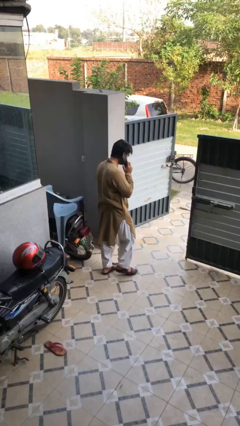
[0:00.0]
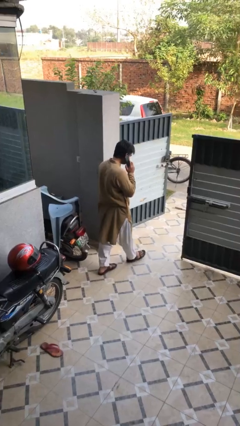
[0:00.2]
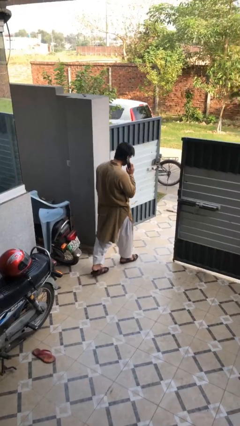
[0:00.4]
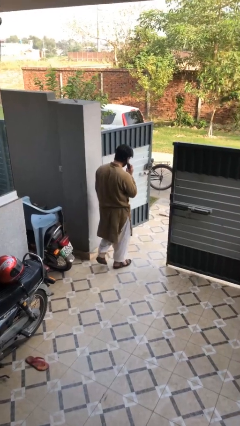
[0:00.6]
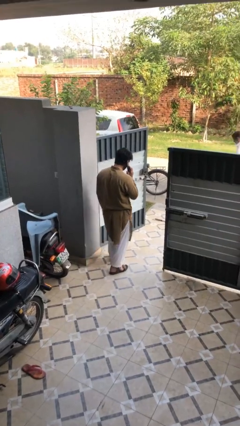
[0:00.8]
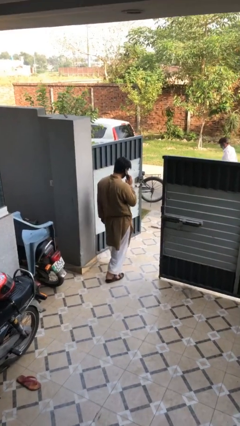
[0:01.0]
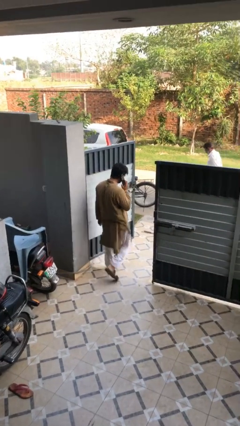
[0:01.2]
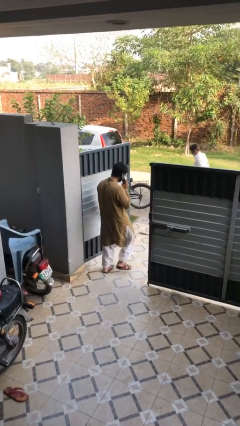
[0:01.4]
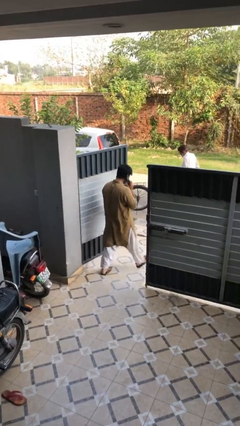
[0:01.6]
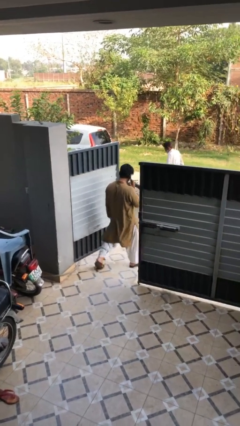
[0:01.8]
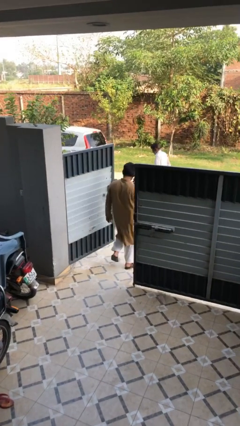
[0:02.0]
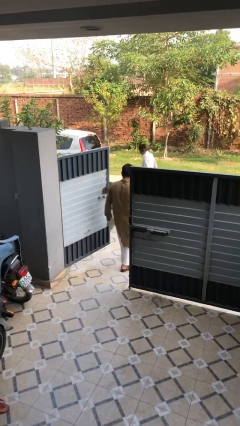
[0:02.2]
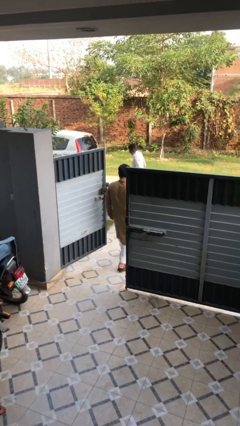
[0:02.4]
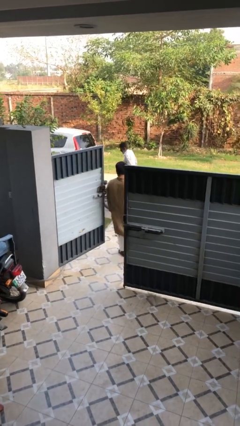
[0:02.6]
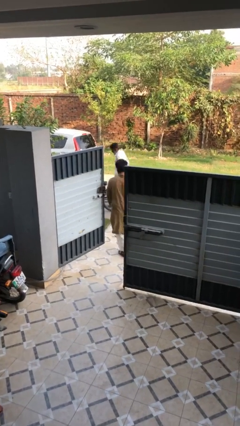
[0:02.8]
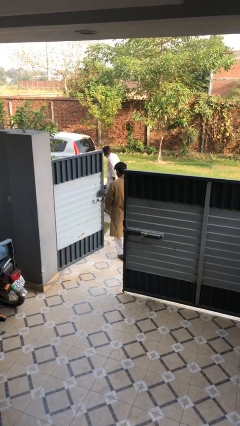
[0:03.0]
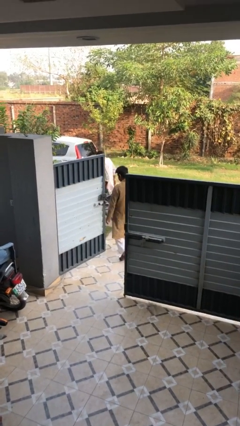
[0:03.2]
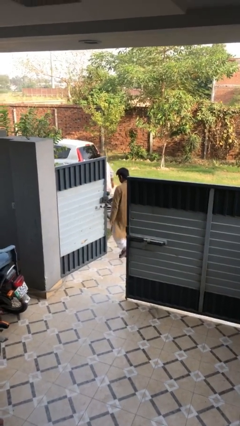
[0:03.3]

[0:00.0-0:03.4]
person exits scene through structure

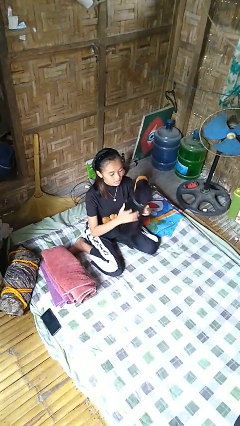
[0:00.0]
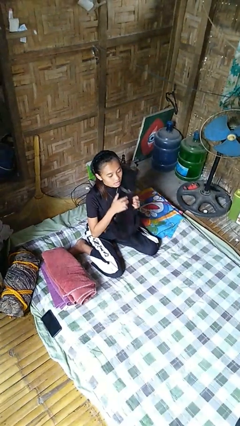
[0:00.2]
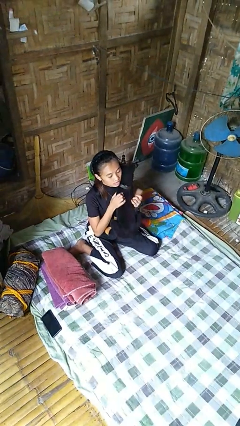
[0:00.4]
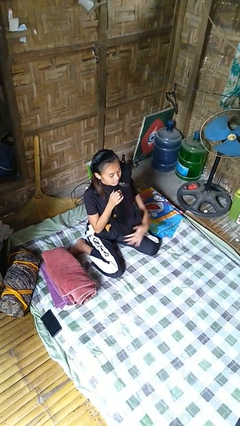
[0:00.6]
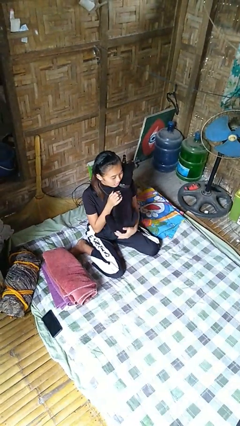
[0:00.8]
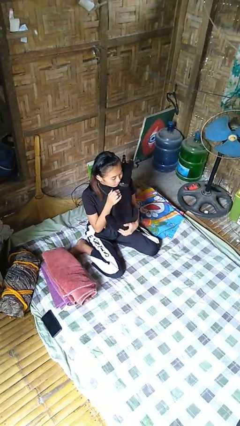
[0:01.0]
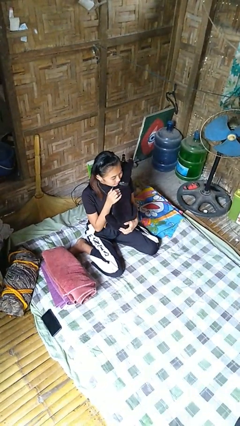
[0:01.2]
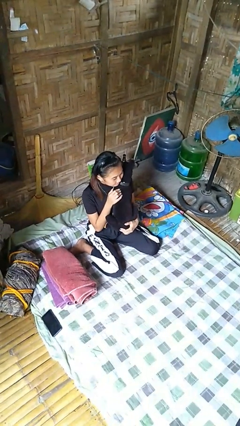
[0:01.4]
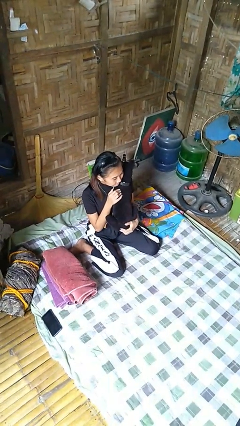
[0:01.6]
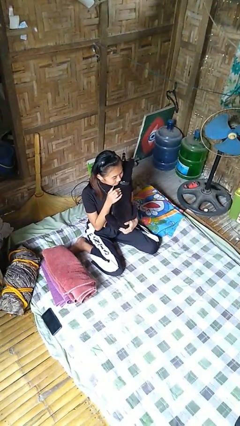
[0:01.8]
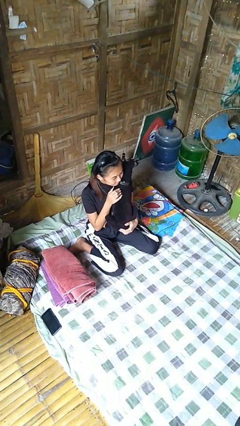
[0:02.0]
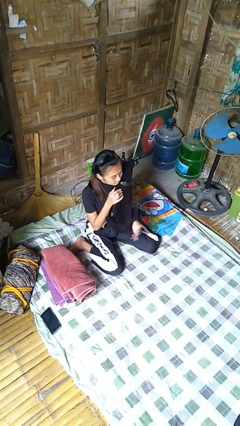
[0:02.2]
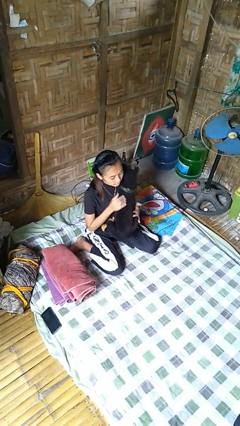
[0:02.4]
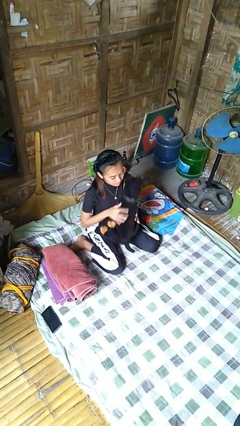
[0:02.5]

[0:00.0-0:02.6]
person hugs stuffed animal

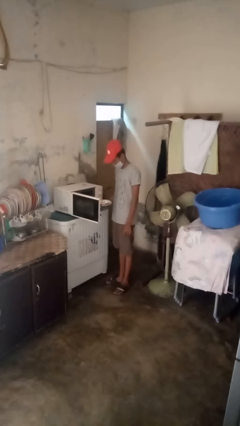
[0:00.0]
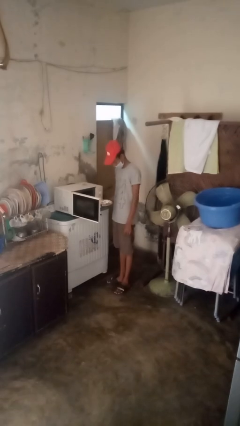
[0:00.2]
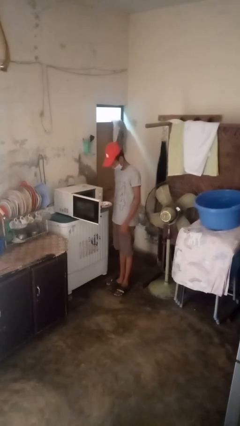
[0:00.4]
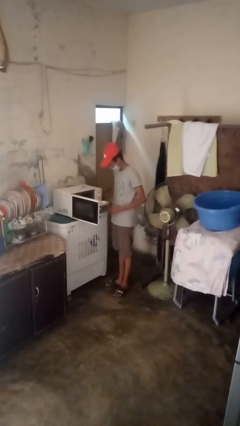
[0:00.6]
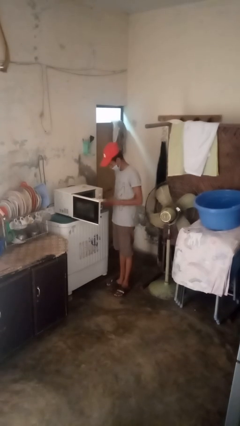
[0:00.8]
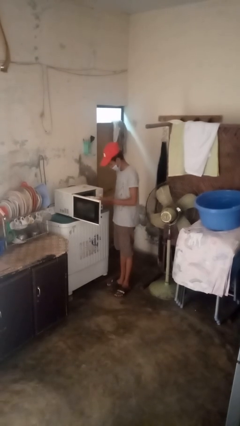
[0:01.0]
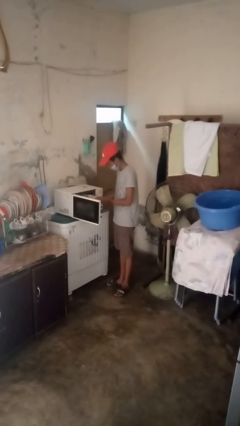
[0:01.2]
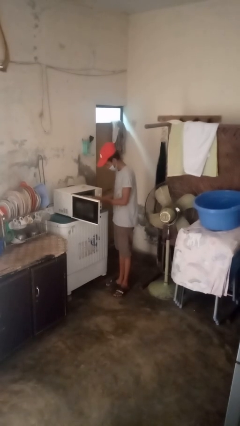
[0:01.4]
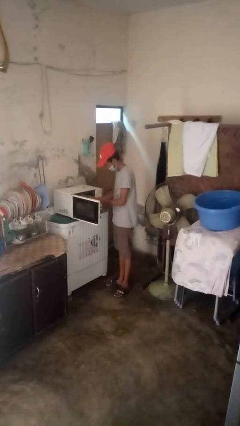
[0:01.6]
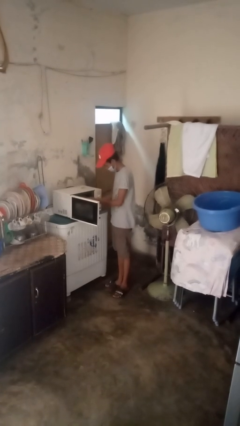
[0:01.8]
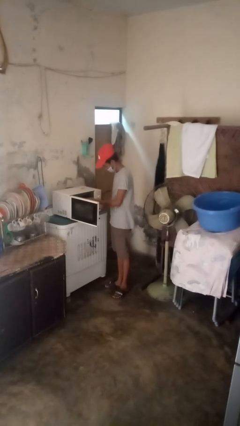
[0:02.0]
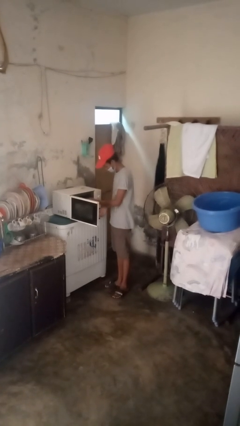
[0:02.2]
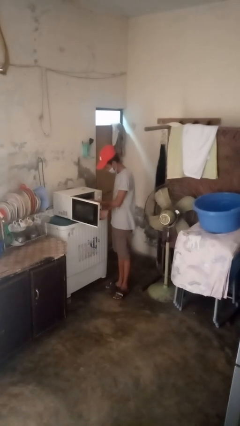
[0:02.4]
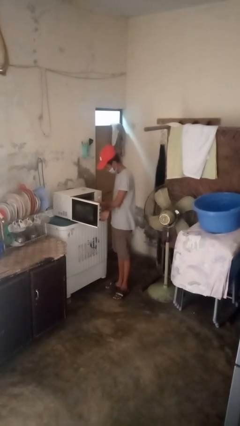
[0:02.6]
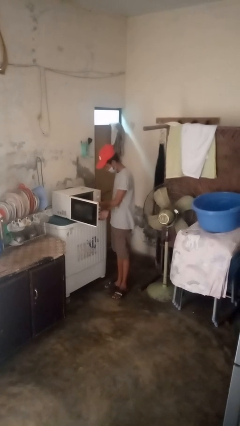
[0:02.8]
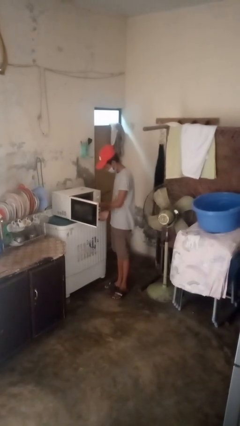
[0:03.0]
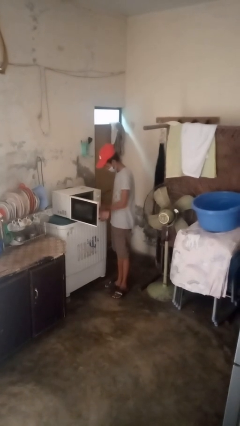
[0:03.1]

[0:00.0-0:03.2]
person puts object into microwave

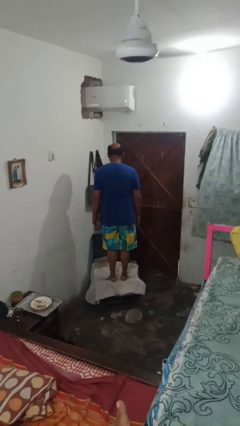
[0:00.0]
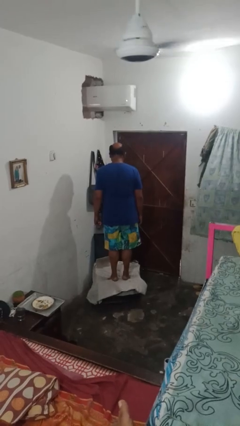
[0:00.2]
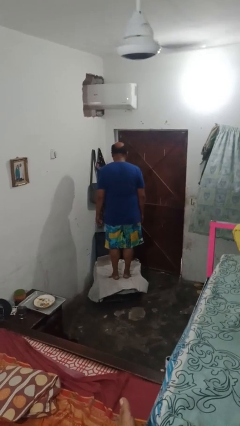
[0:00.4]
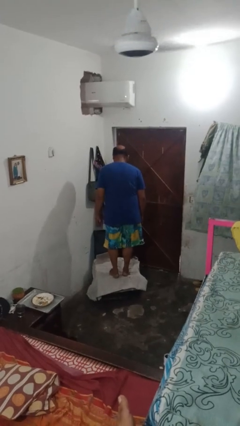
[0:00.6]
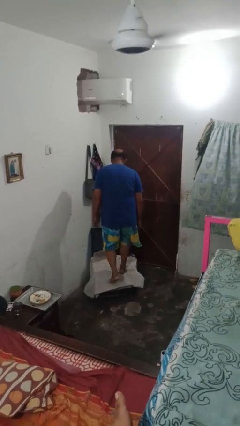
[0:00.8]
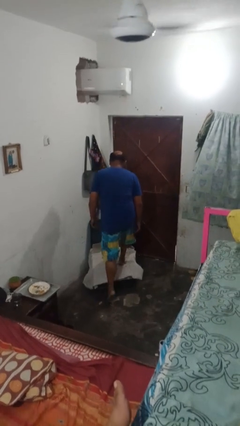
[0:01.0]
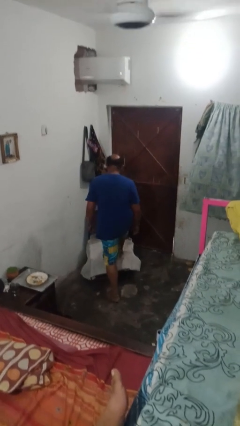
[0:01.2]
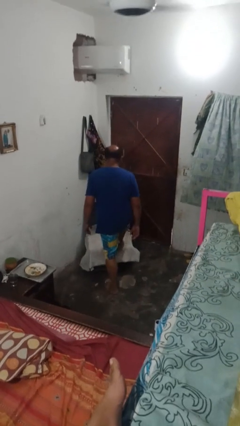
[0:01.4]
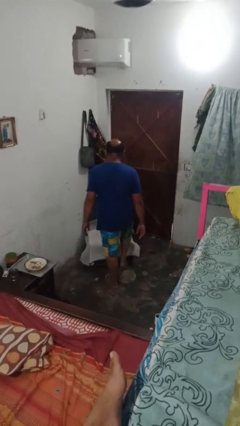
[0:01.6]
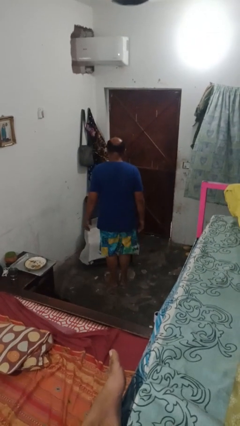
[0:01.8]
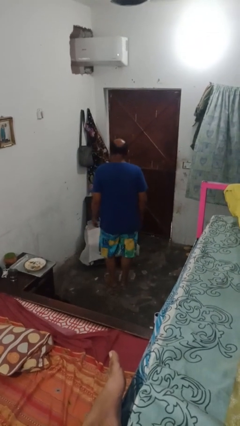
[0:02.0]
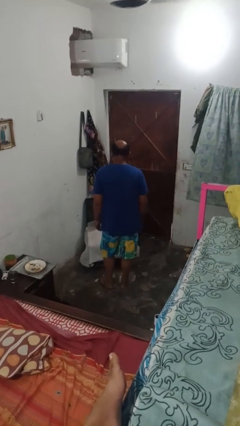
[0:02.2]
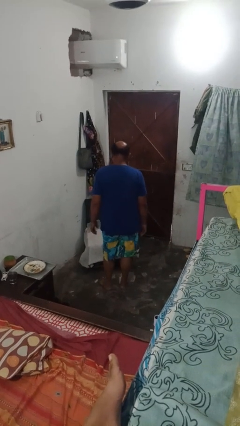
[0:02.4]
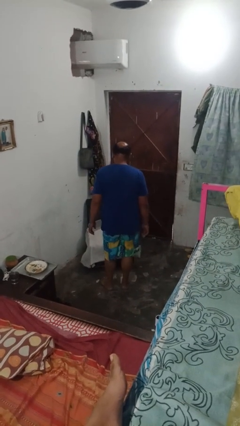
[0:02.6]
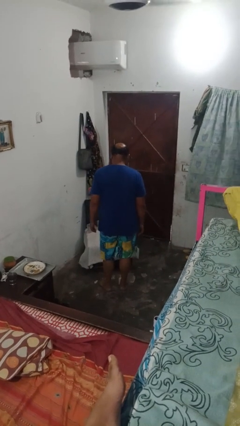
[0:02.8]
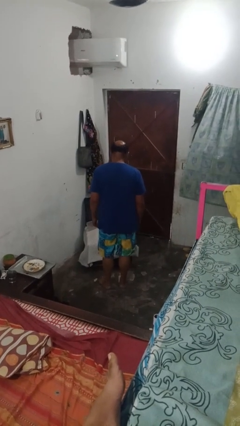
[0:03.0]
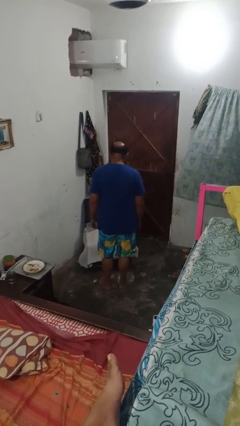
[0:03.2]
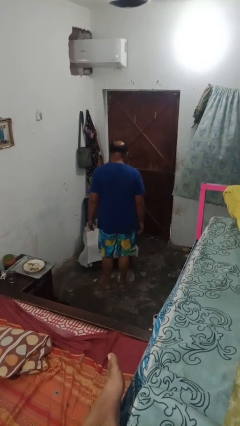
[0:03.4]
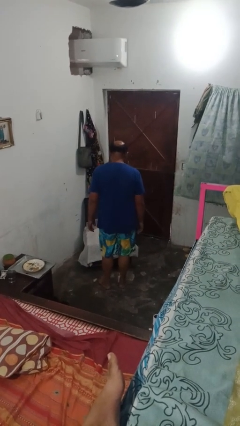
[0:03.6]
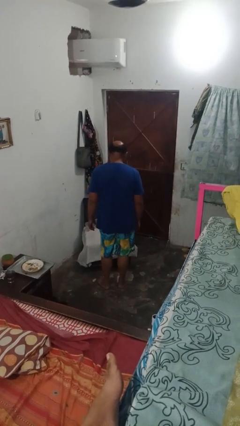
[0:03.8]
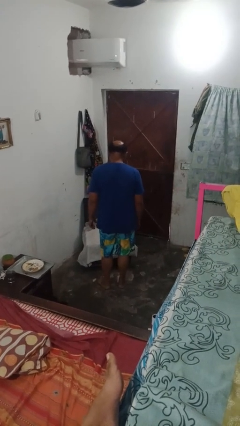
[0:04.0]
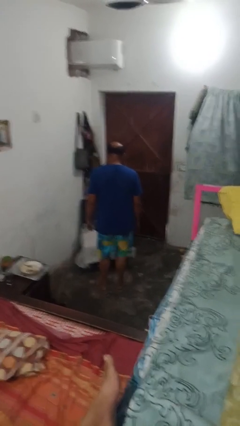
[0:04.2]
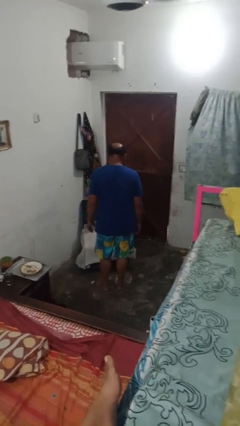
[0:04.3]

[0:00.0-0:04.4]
person climbs off couch

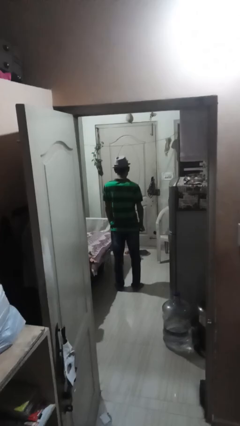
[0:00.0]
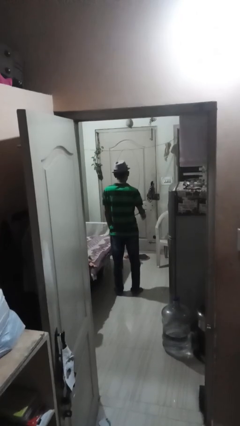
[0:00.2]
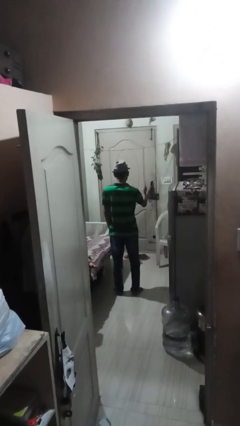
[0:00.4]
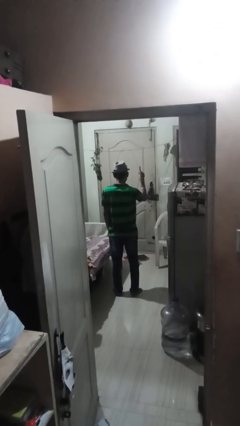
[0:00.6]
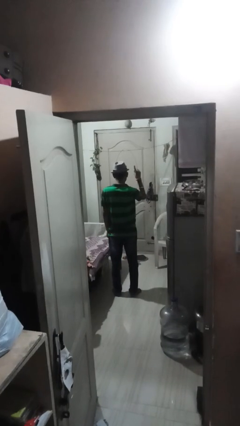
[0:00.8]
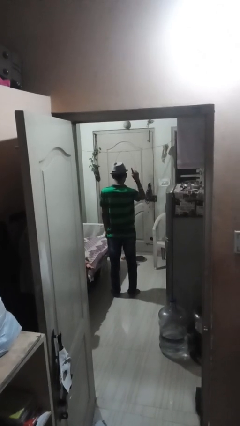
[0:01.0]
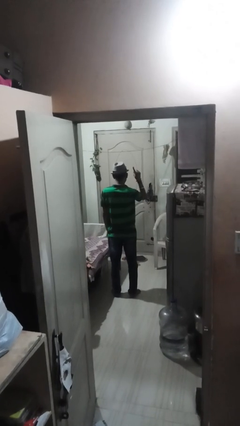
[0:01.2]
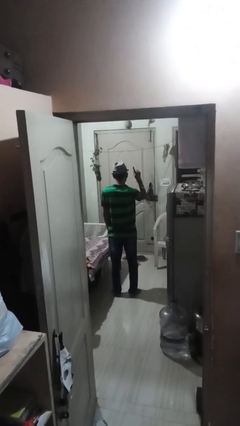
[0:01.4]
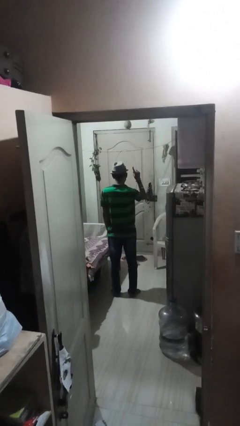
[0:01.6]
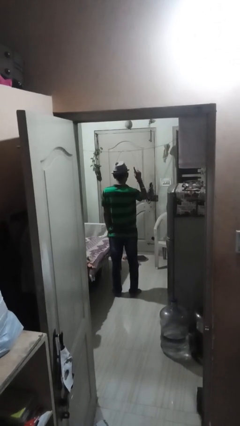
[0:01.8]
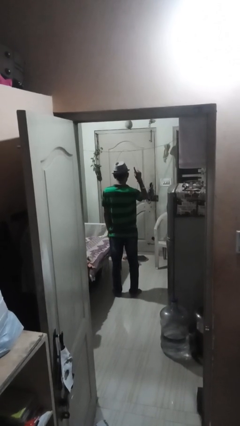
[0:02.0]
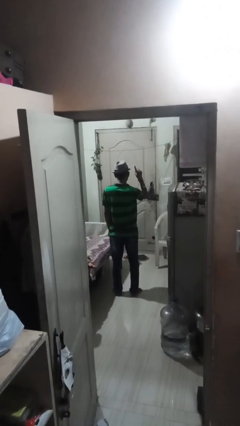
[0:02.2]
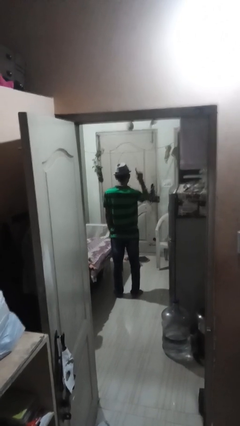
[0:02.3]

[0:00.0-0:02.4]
person gestures number one

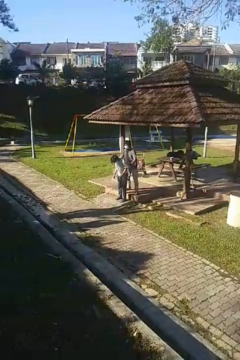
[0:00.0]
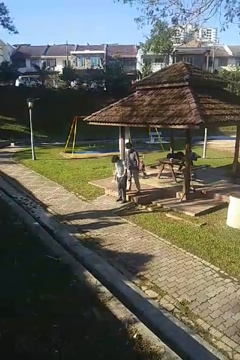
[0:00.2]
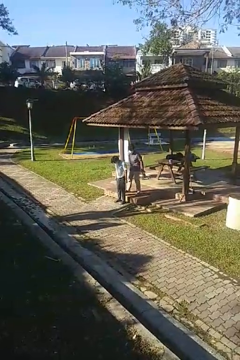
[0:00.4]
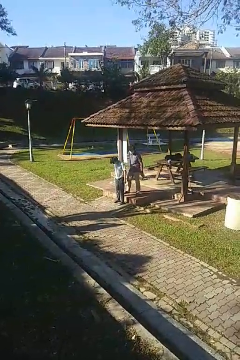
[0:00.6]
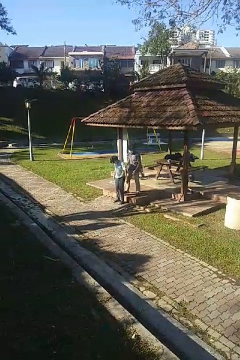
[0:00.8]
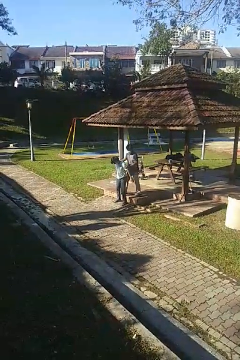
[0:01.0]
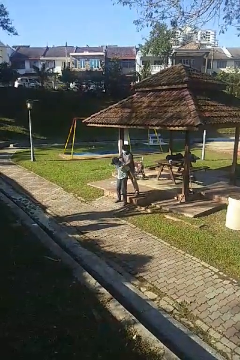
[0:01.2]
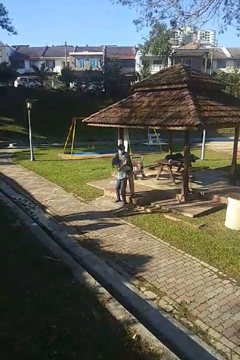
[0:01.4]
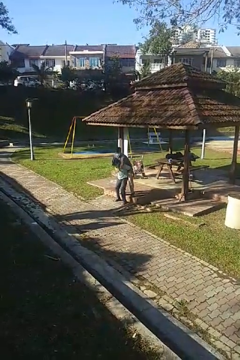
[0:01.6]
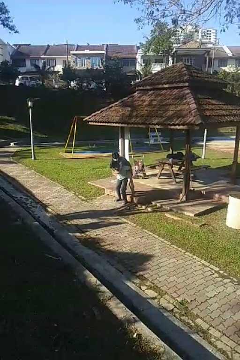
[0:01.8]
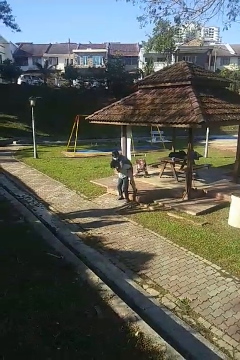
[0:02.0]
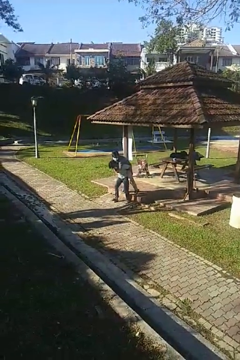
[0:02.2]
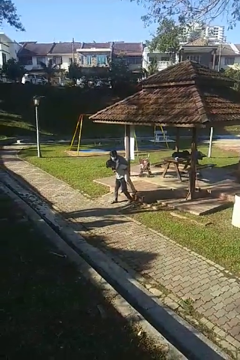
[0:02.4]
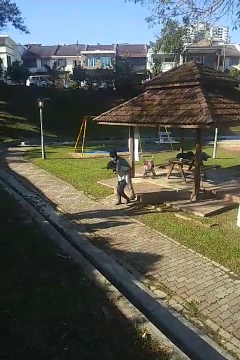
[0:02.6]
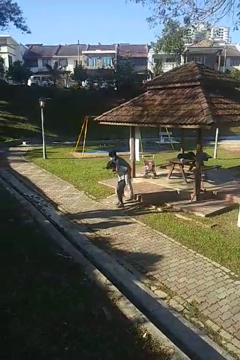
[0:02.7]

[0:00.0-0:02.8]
person carries person over shoulder
